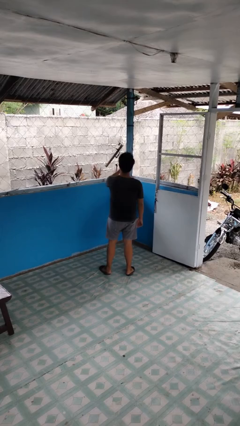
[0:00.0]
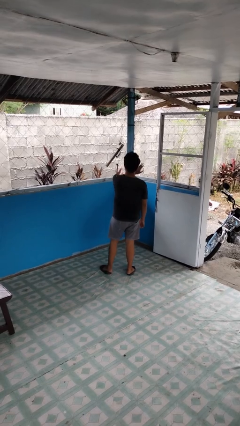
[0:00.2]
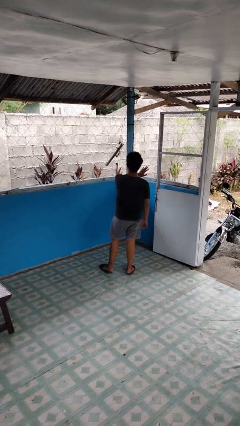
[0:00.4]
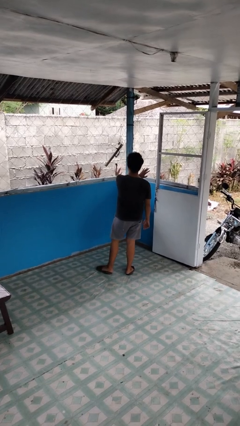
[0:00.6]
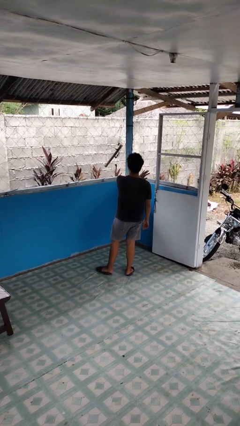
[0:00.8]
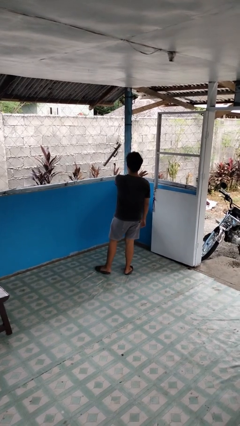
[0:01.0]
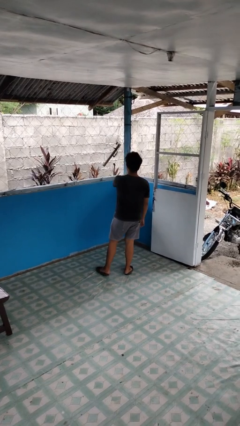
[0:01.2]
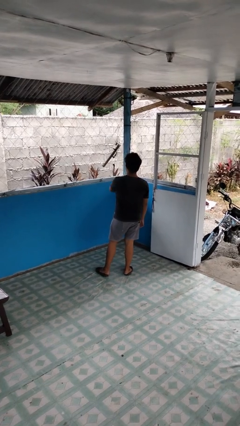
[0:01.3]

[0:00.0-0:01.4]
person gestures swipe right

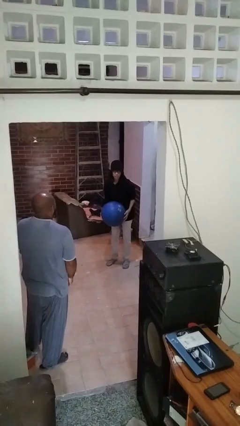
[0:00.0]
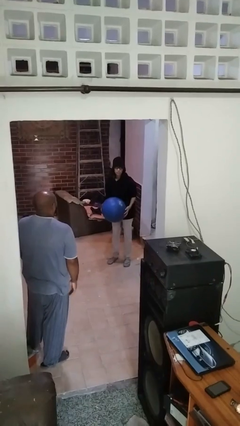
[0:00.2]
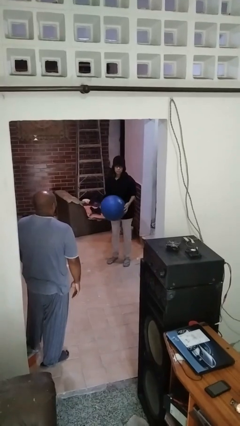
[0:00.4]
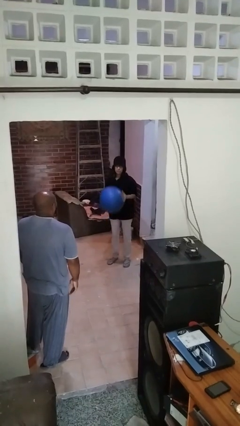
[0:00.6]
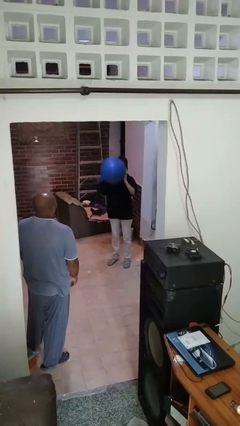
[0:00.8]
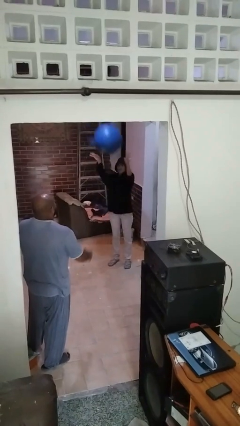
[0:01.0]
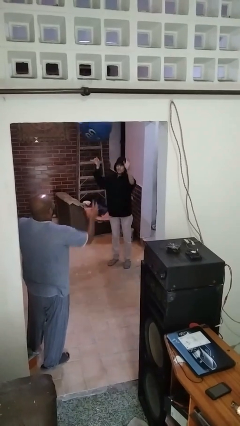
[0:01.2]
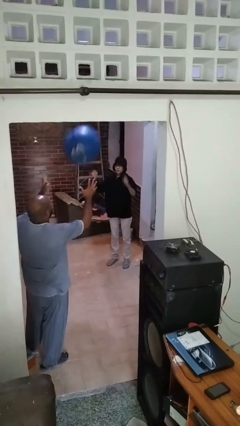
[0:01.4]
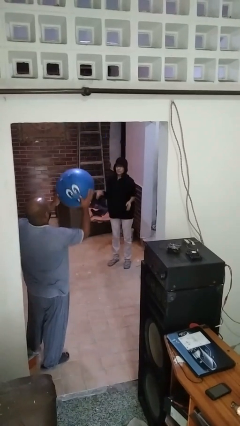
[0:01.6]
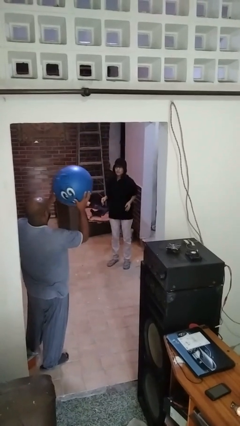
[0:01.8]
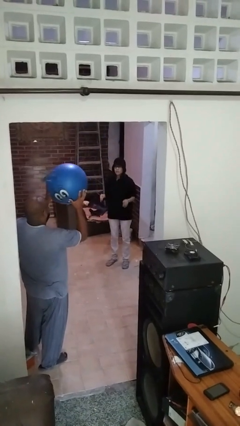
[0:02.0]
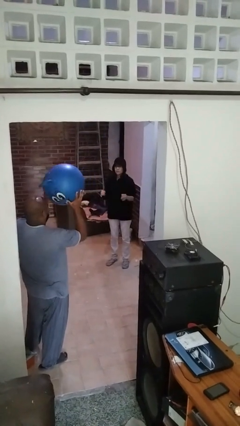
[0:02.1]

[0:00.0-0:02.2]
person throws object to person

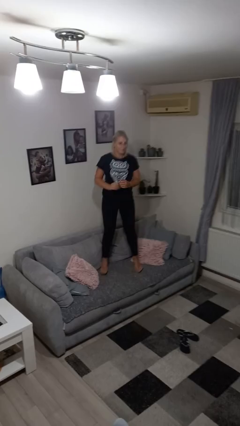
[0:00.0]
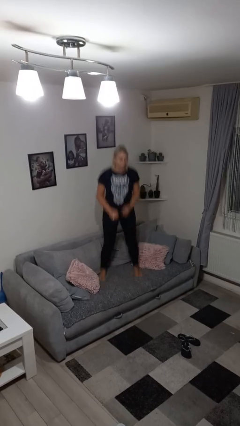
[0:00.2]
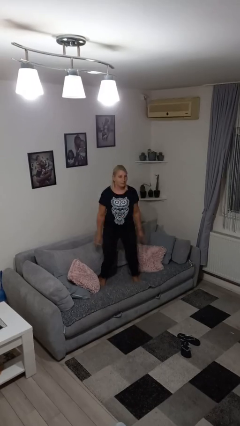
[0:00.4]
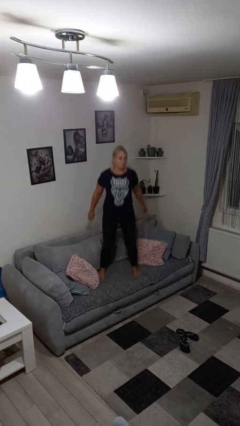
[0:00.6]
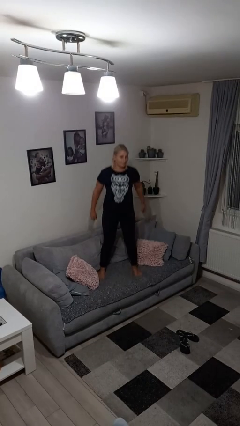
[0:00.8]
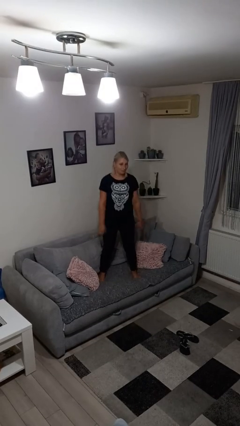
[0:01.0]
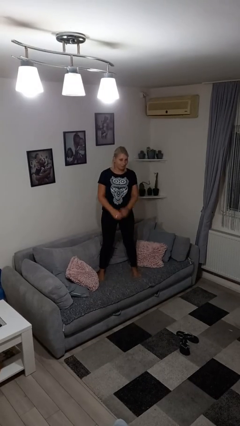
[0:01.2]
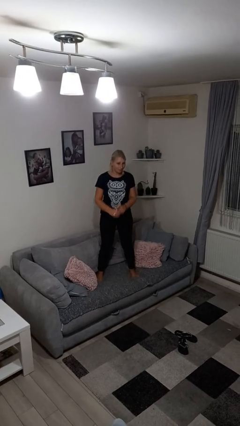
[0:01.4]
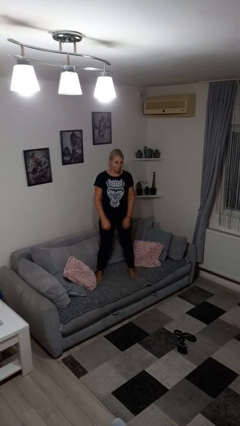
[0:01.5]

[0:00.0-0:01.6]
person jumps on couch

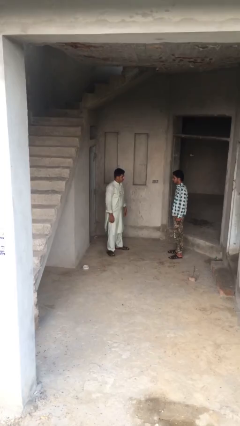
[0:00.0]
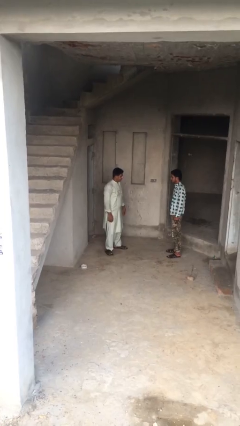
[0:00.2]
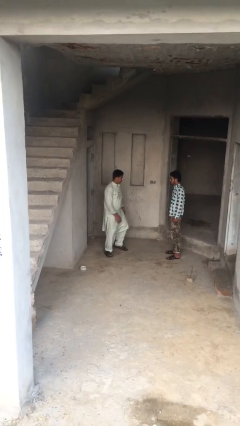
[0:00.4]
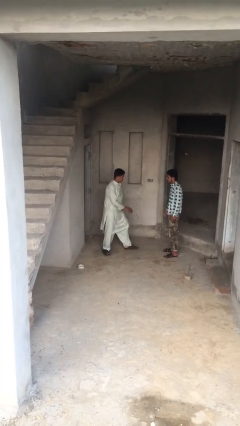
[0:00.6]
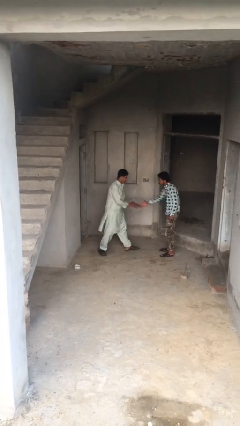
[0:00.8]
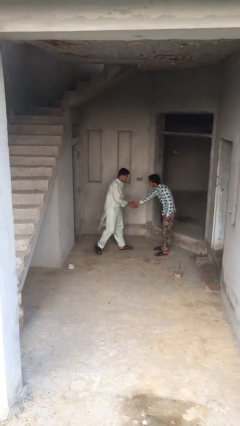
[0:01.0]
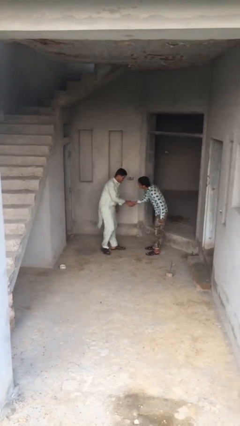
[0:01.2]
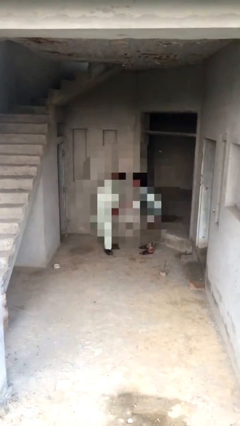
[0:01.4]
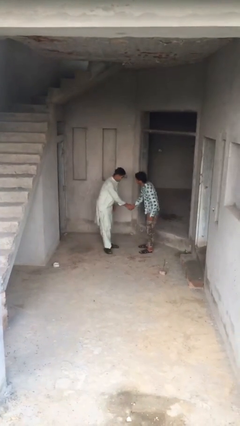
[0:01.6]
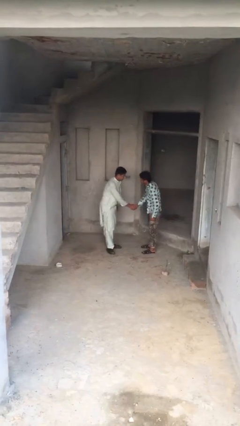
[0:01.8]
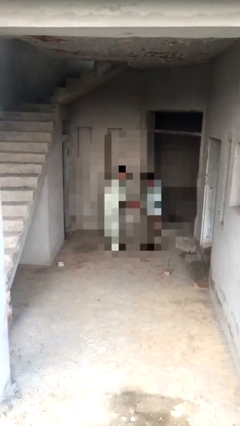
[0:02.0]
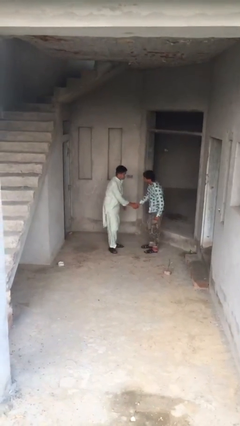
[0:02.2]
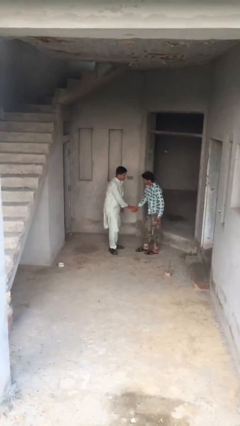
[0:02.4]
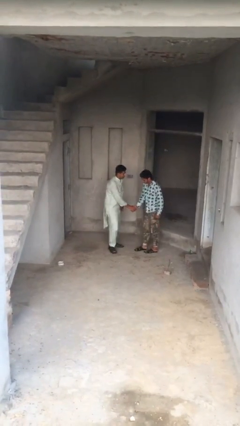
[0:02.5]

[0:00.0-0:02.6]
person shakes hand

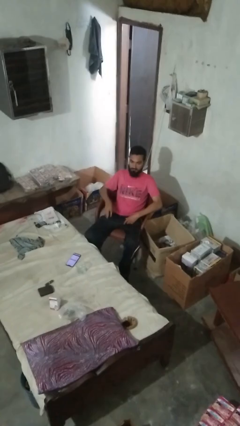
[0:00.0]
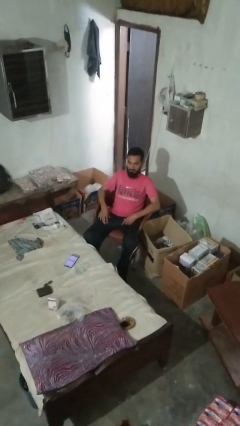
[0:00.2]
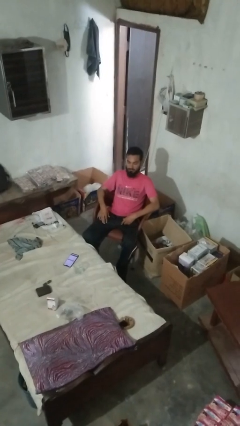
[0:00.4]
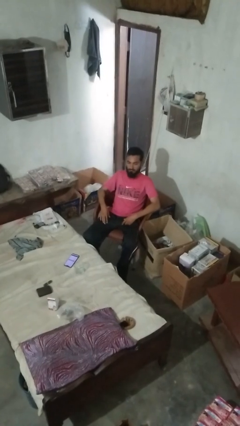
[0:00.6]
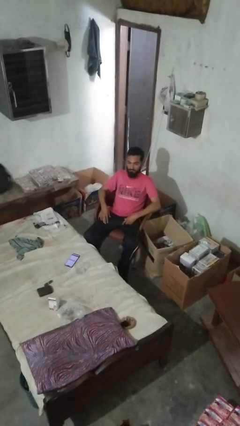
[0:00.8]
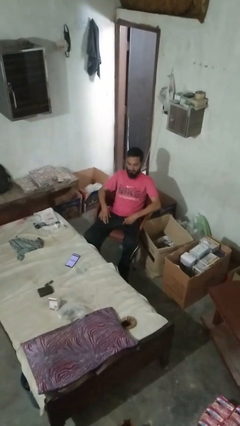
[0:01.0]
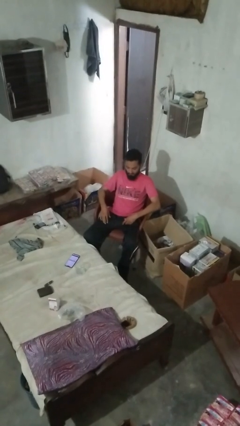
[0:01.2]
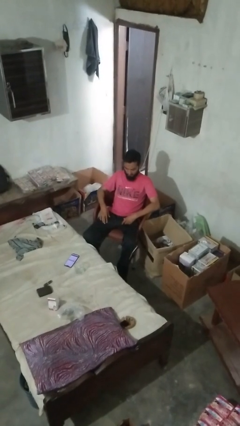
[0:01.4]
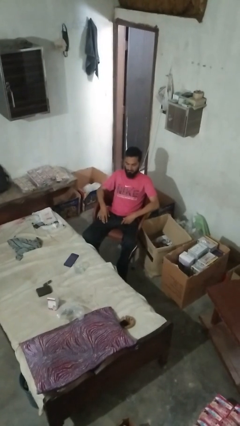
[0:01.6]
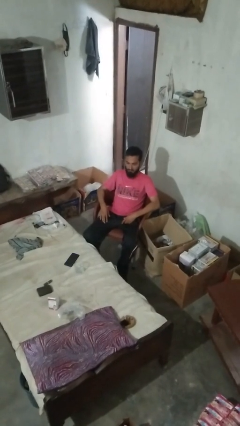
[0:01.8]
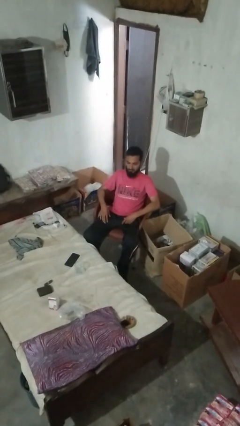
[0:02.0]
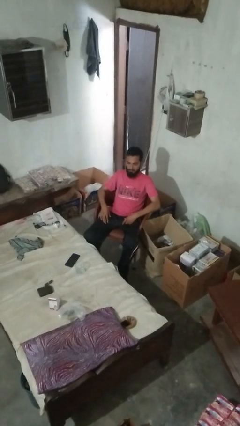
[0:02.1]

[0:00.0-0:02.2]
person nods head

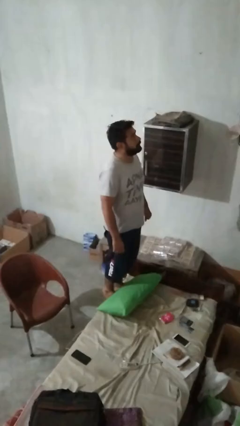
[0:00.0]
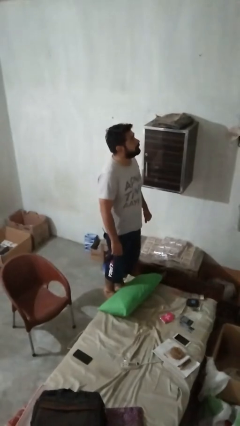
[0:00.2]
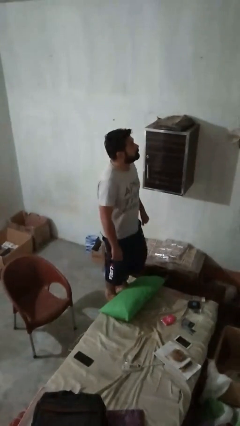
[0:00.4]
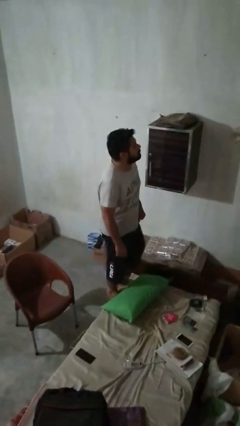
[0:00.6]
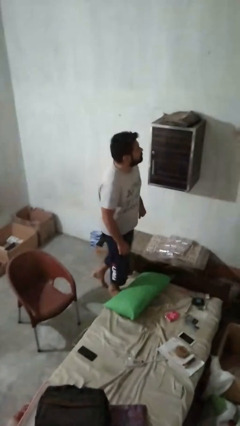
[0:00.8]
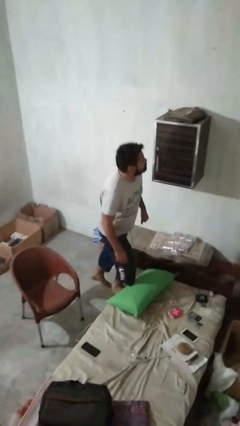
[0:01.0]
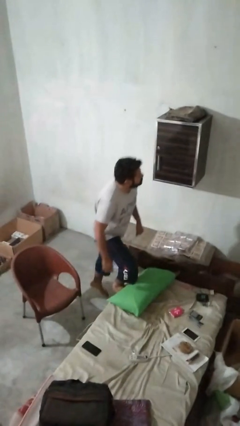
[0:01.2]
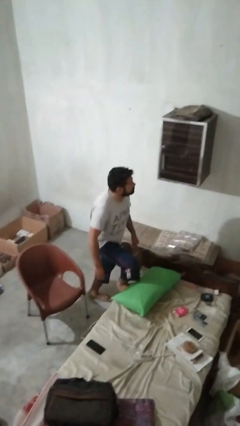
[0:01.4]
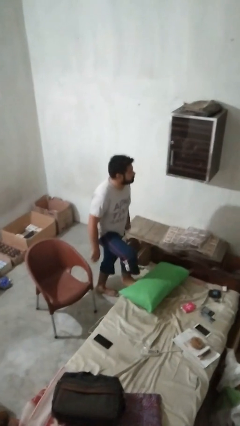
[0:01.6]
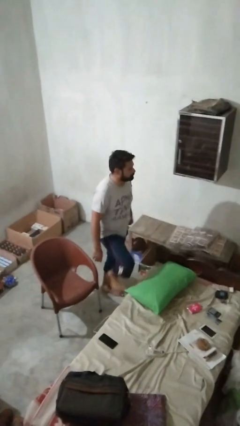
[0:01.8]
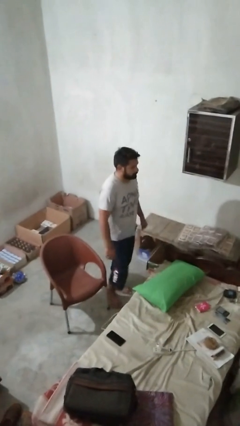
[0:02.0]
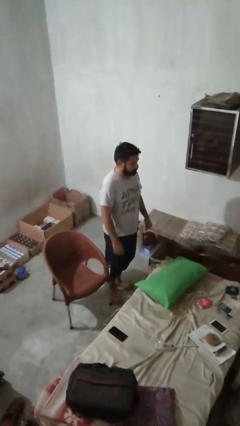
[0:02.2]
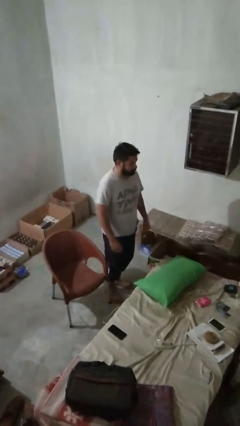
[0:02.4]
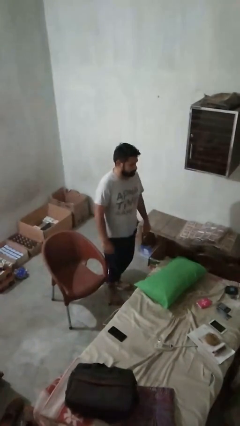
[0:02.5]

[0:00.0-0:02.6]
person climbs off couch

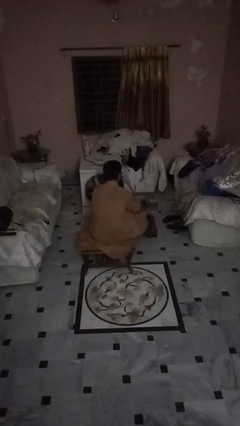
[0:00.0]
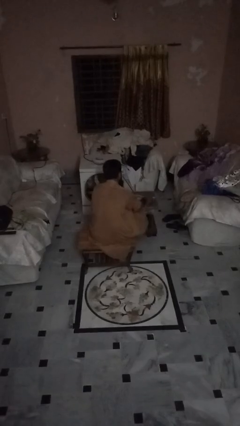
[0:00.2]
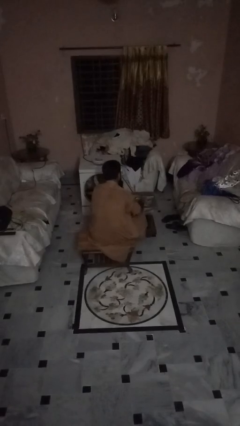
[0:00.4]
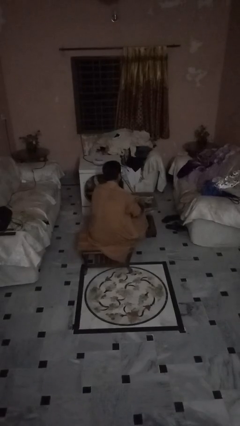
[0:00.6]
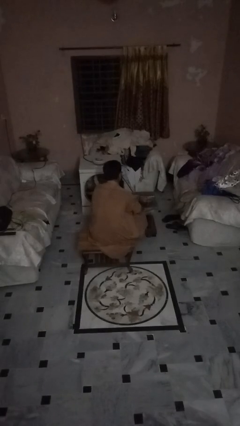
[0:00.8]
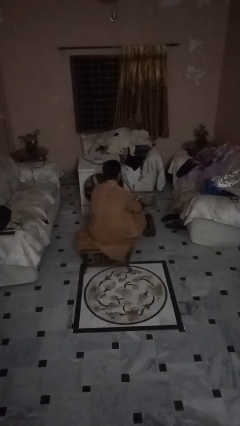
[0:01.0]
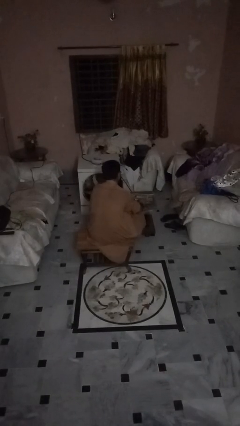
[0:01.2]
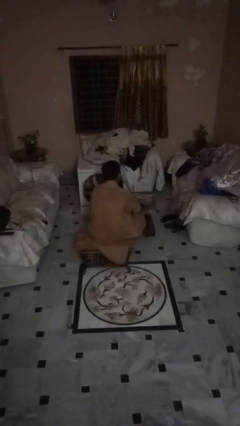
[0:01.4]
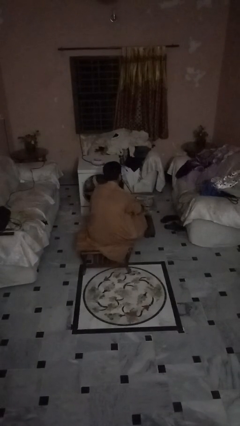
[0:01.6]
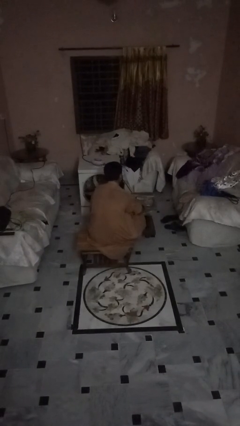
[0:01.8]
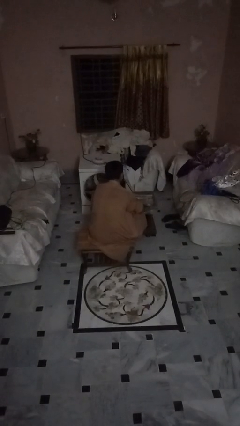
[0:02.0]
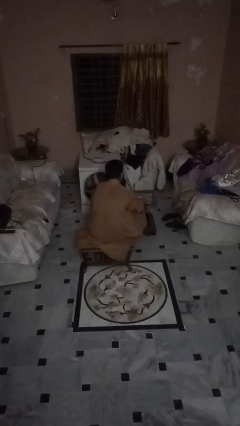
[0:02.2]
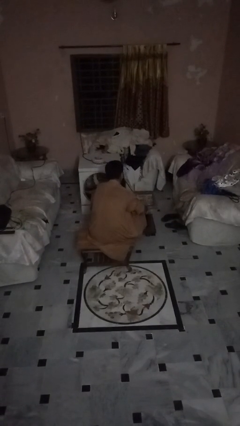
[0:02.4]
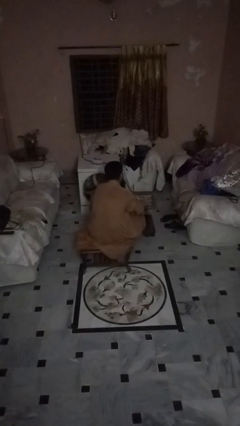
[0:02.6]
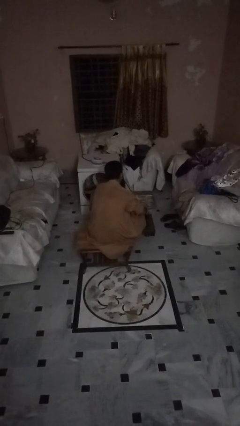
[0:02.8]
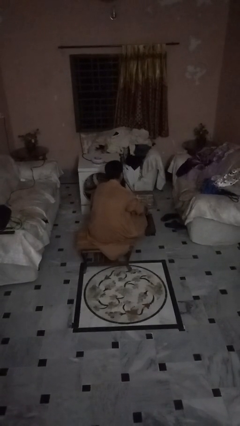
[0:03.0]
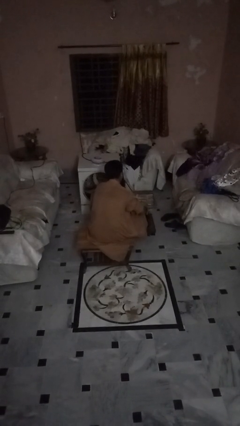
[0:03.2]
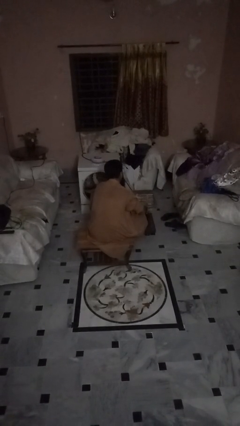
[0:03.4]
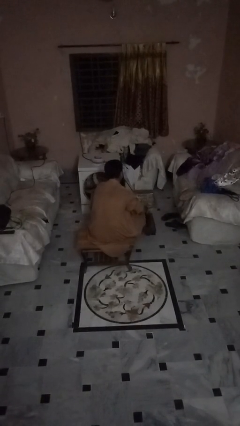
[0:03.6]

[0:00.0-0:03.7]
person tears paper

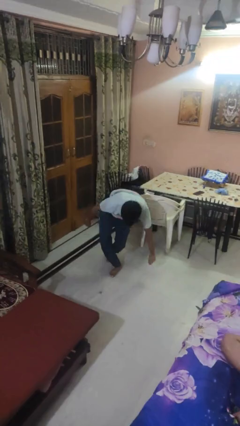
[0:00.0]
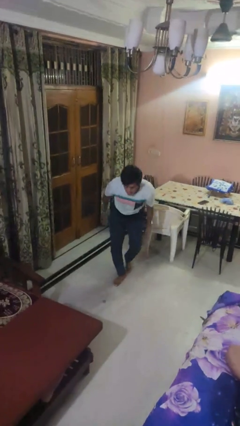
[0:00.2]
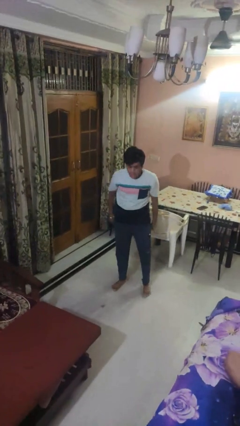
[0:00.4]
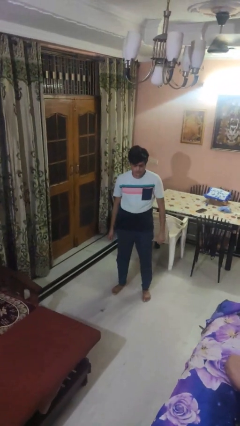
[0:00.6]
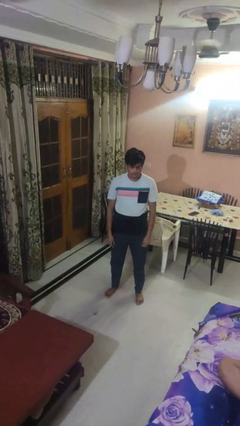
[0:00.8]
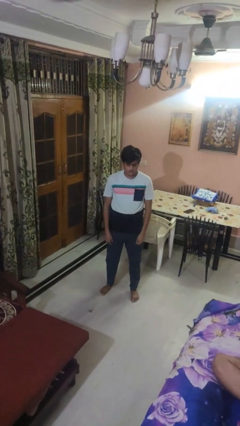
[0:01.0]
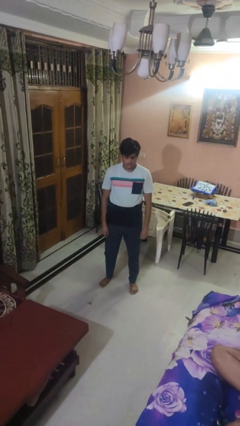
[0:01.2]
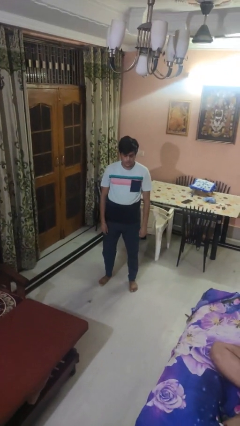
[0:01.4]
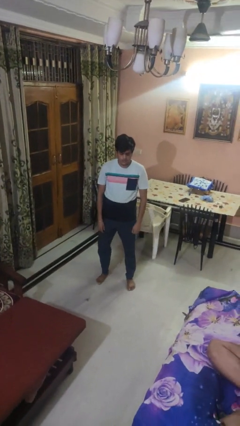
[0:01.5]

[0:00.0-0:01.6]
person stands up from floor
